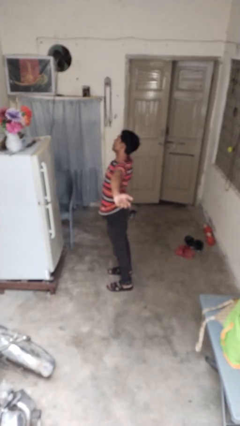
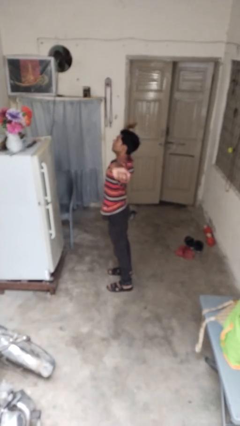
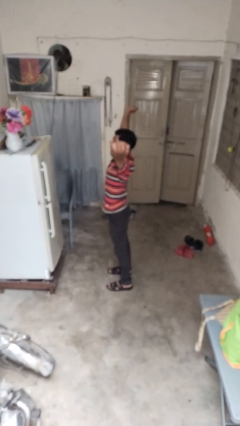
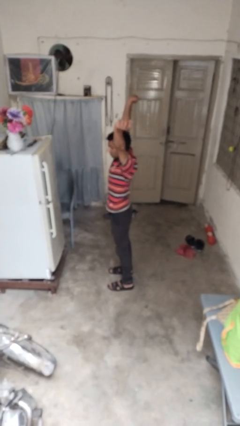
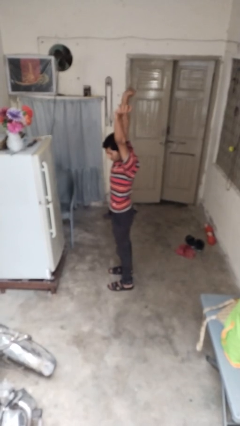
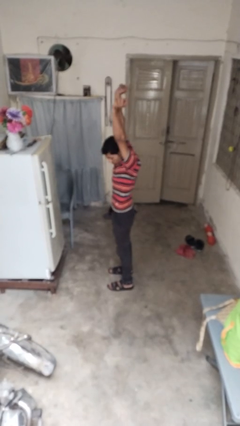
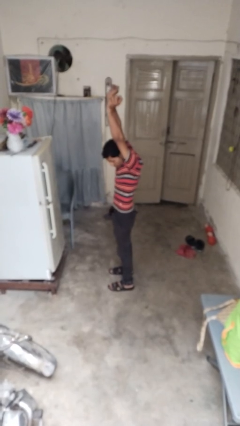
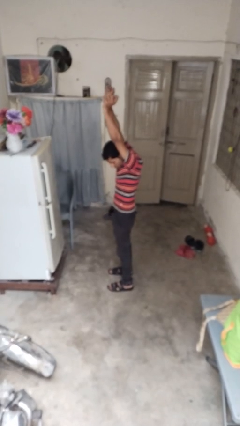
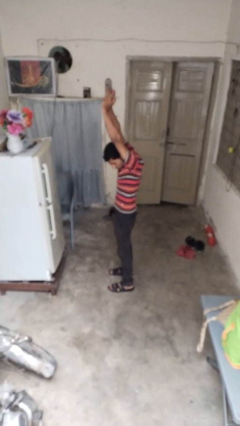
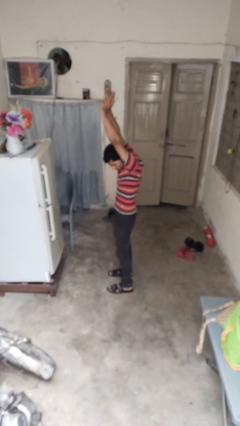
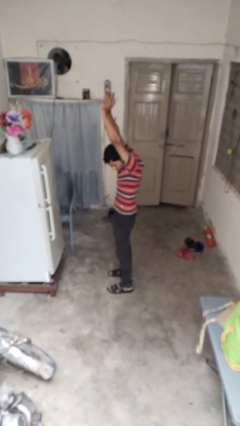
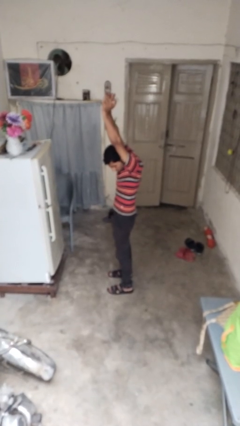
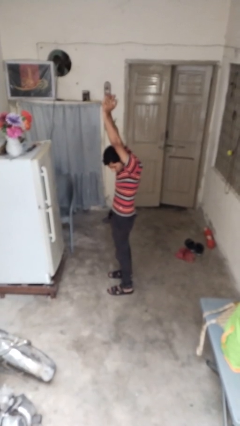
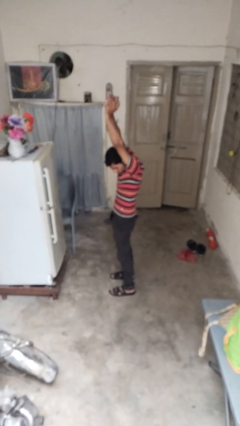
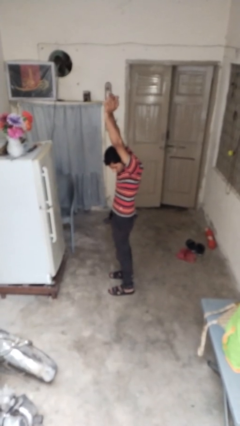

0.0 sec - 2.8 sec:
person stretches arms over head

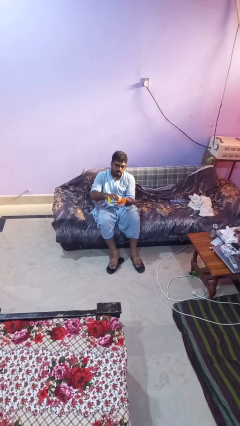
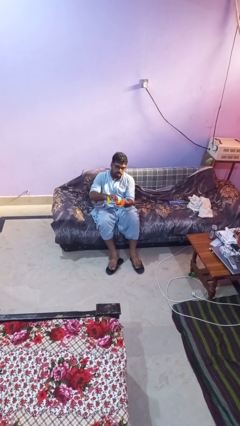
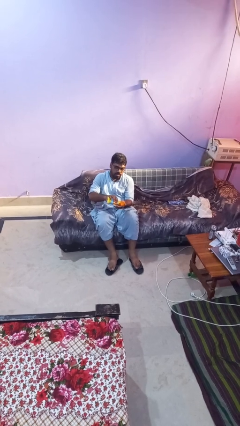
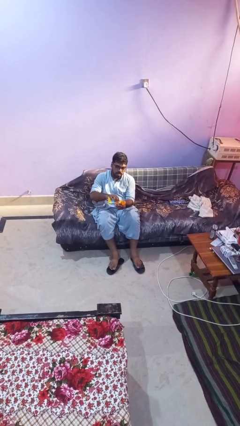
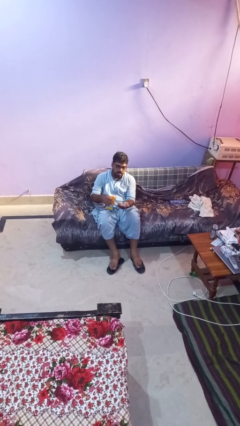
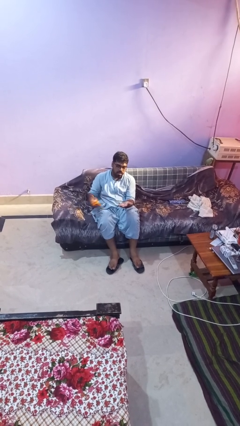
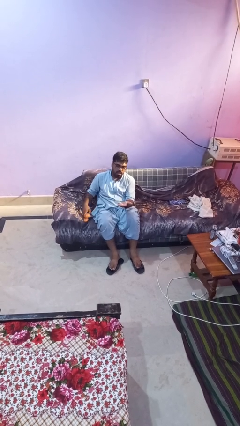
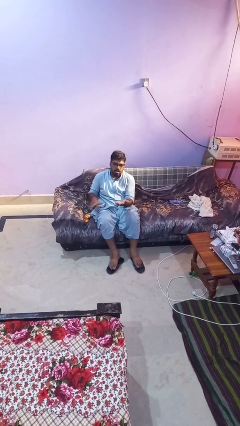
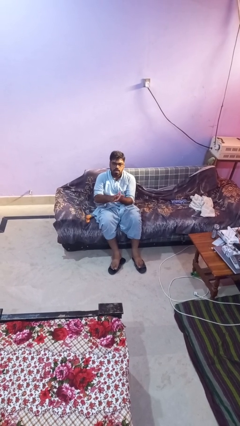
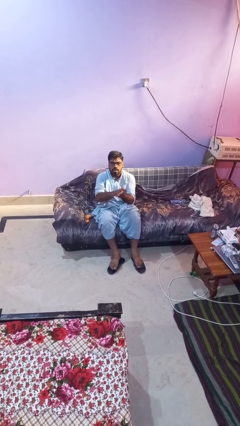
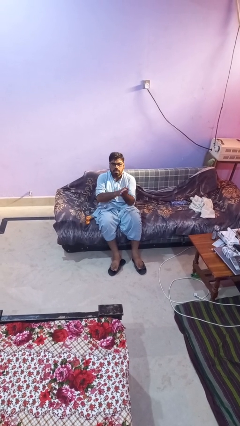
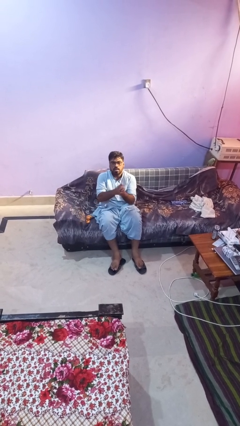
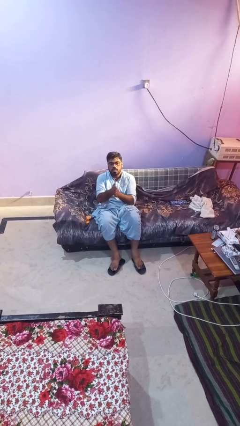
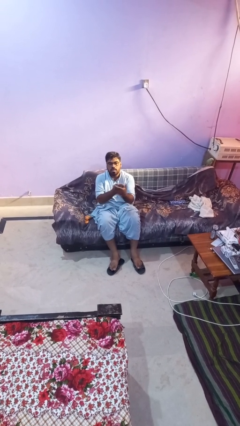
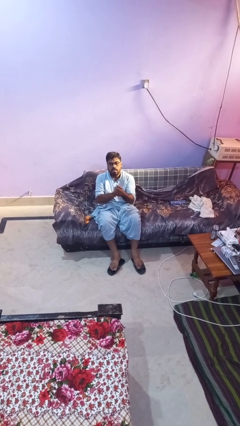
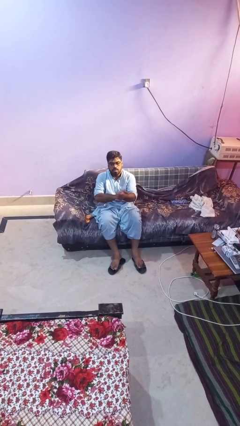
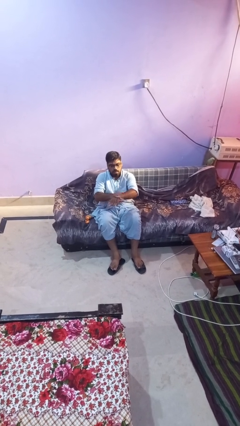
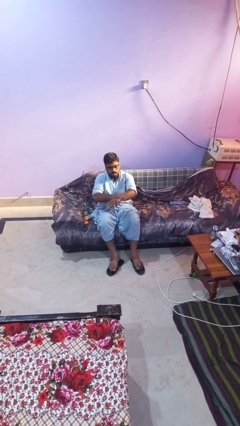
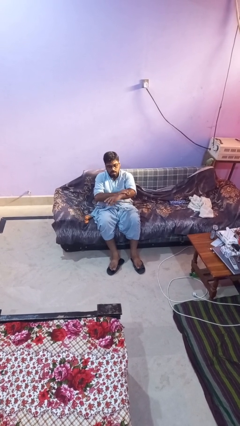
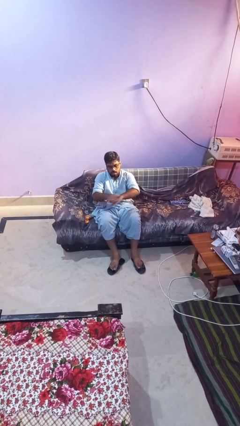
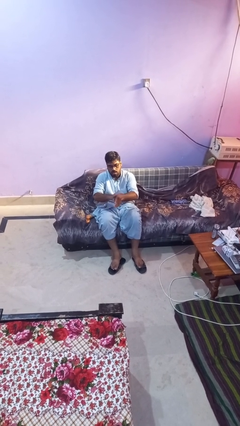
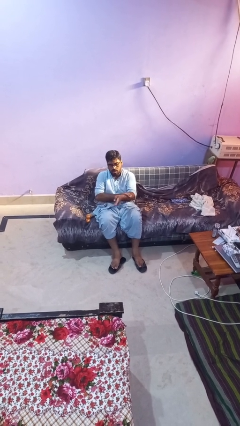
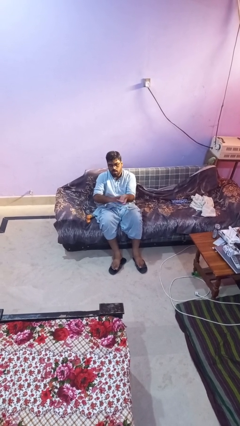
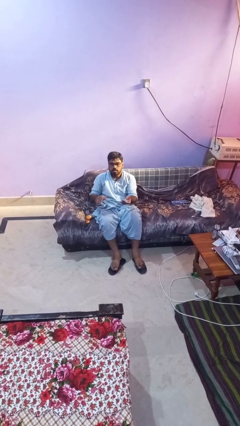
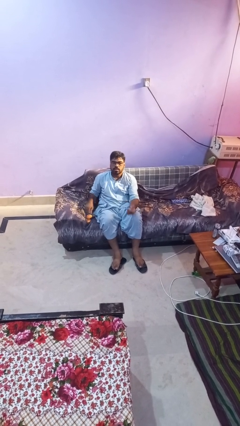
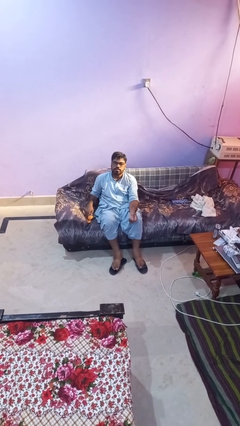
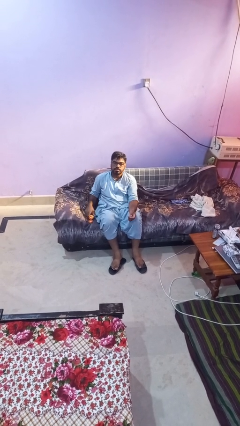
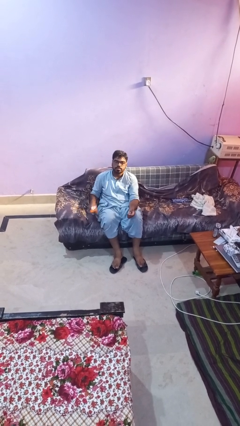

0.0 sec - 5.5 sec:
person applies sunscreen

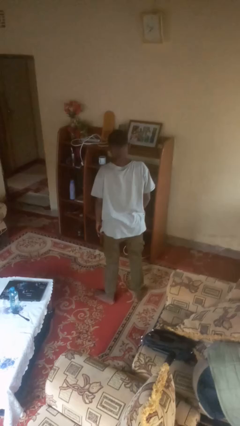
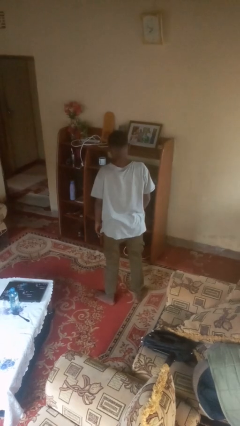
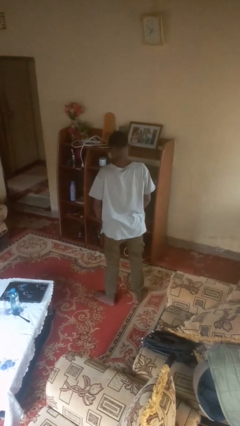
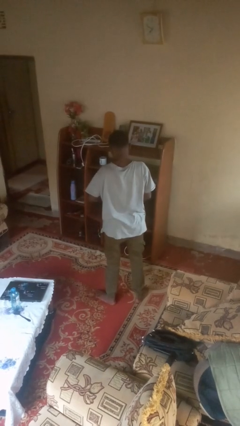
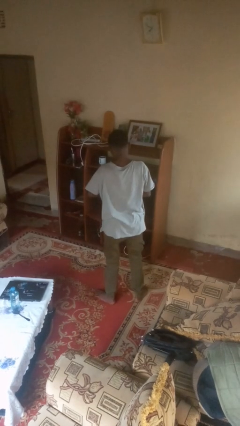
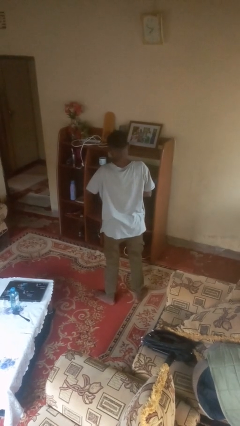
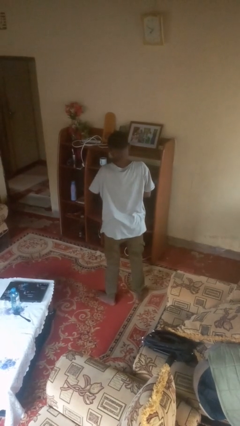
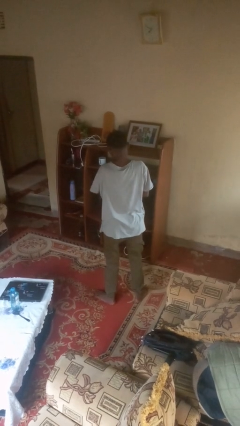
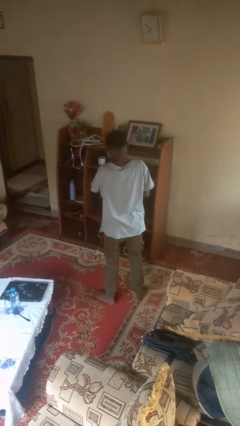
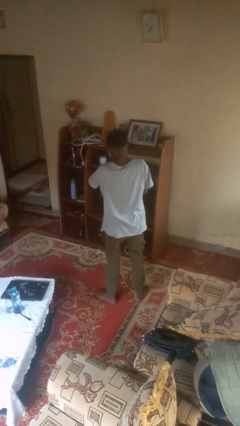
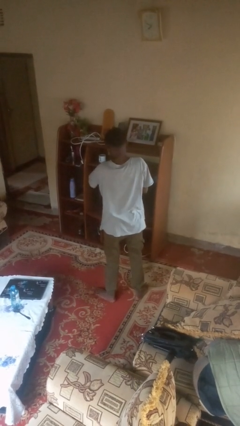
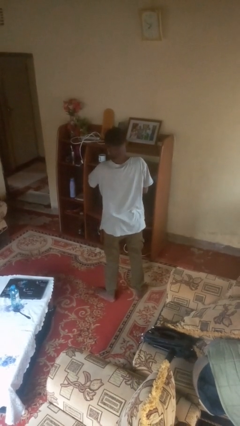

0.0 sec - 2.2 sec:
person puts on wristwatch

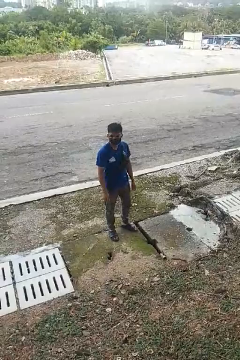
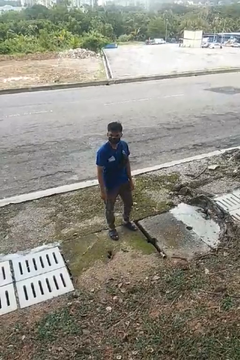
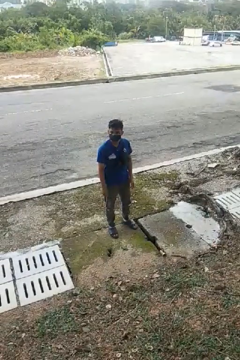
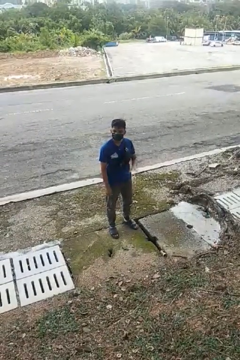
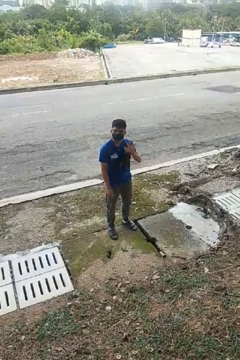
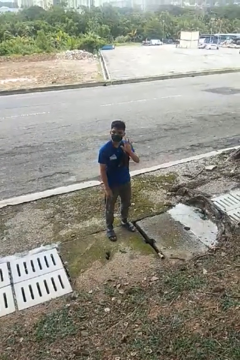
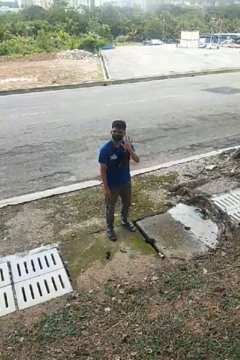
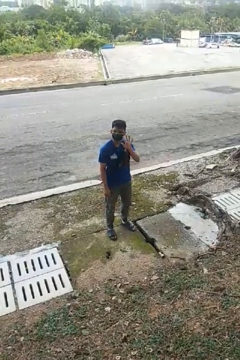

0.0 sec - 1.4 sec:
person gestures number five

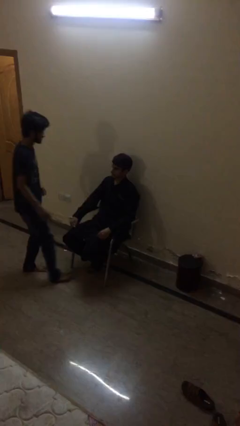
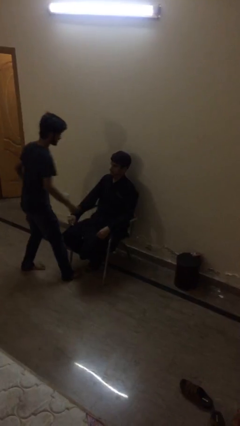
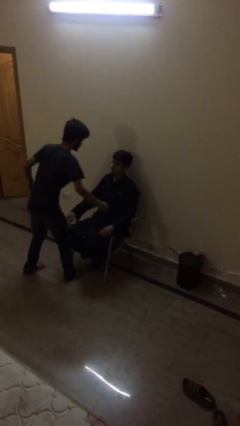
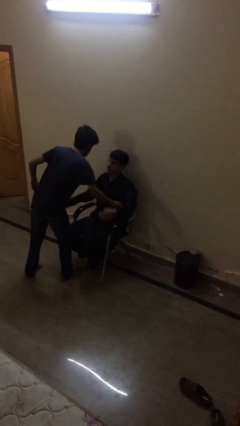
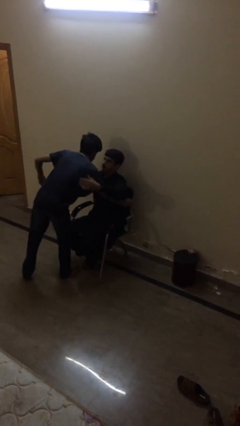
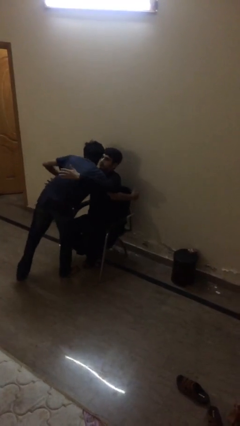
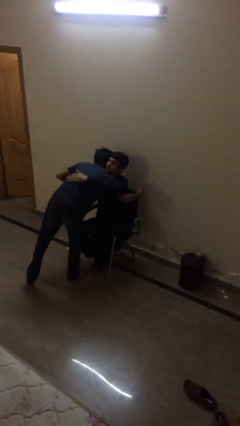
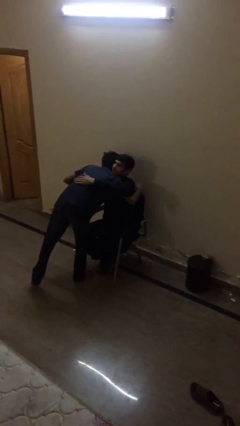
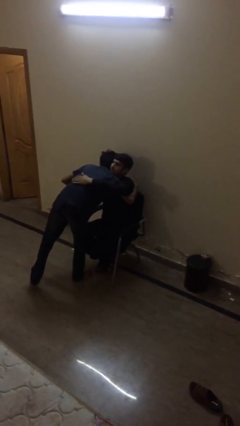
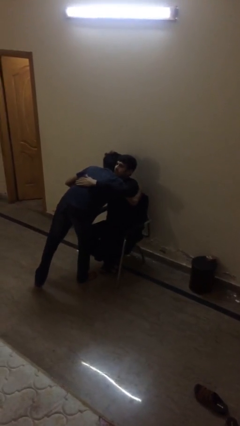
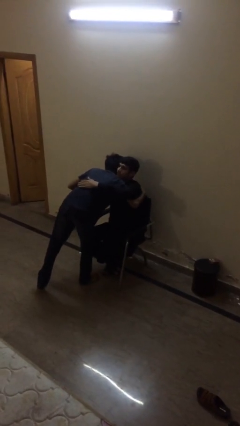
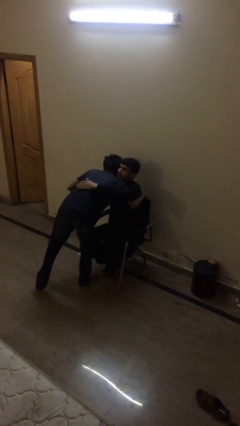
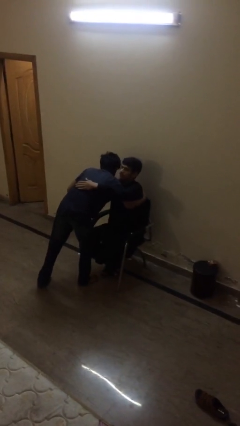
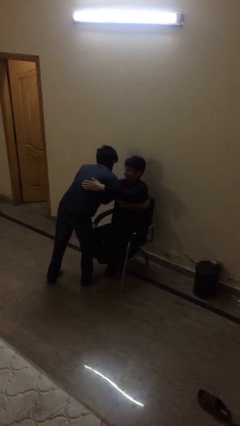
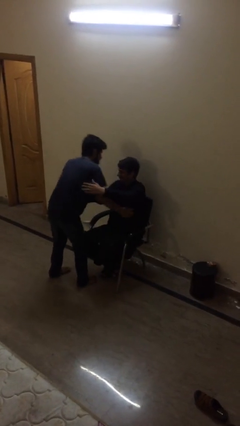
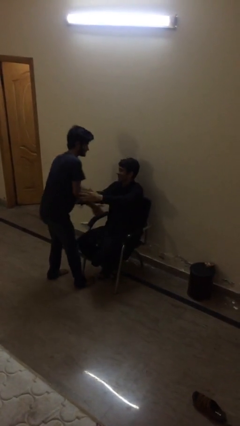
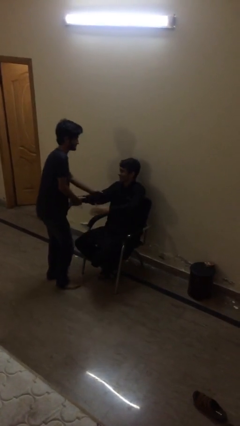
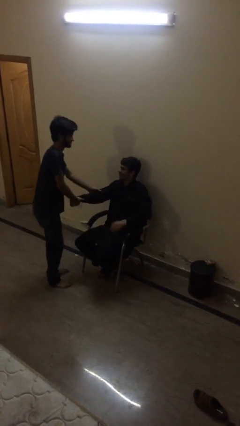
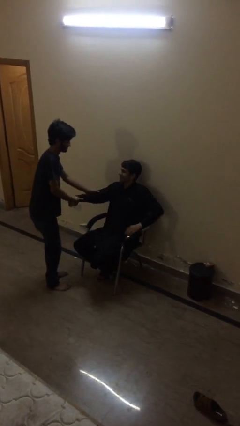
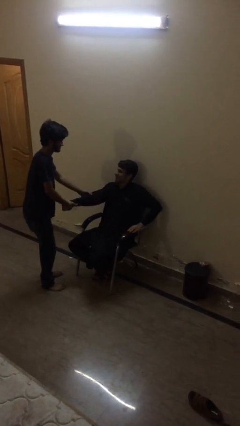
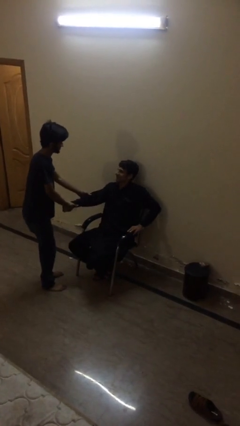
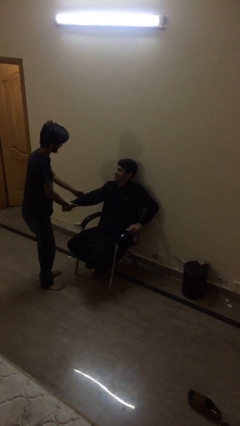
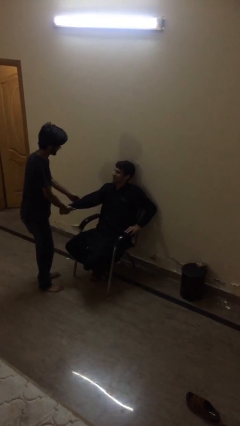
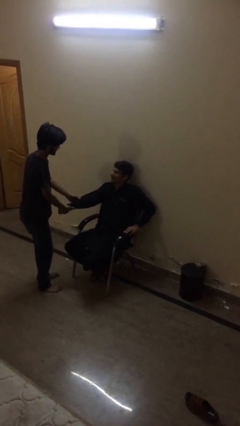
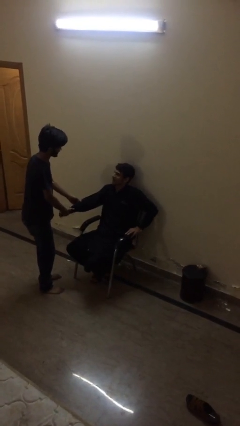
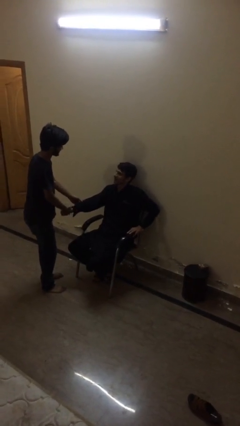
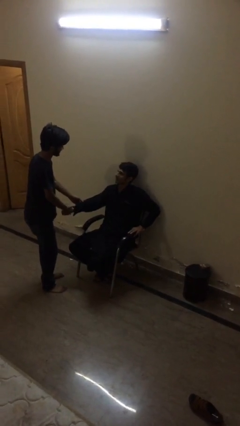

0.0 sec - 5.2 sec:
person embraces person

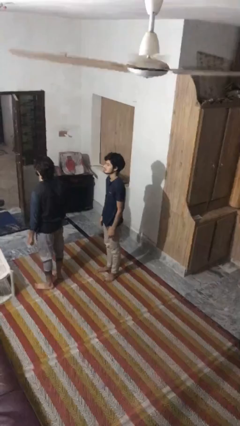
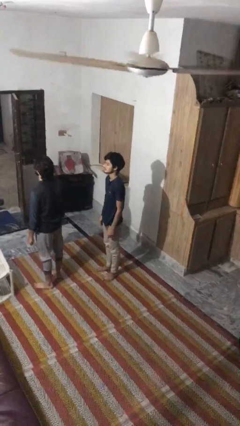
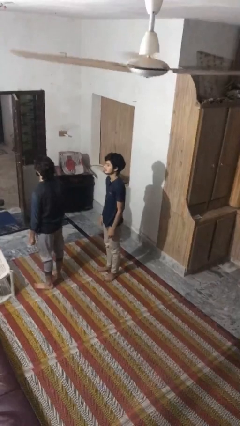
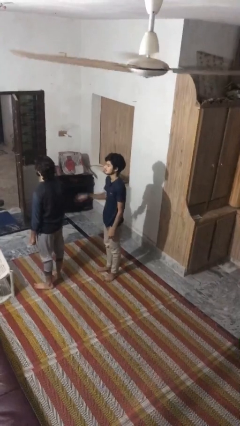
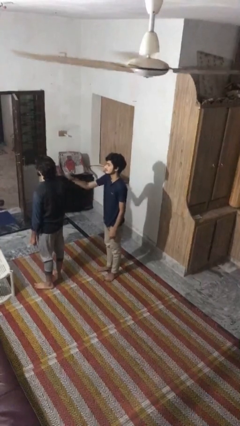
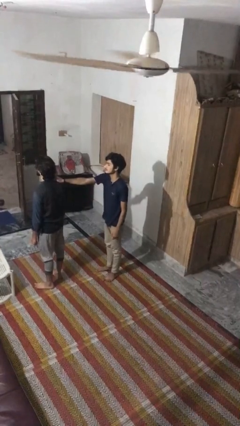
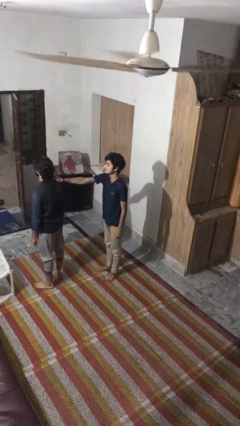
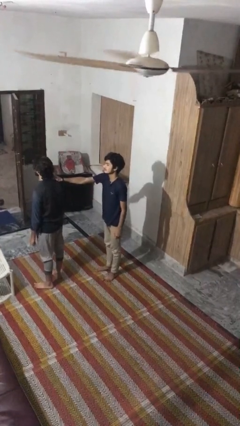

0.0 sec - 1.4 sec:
person grabs person by shoulder
